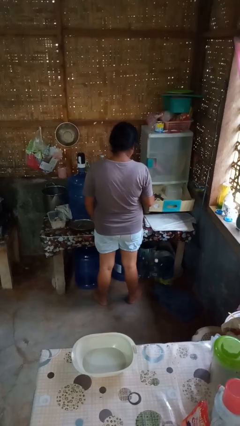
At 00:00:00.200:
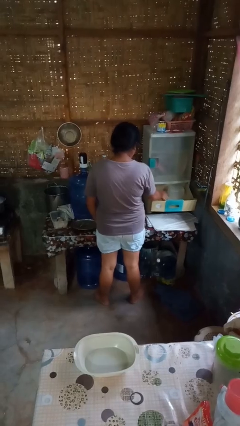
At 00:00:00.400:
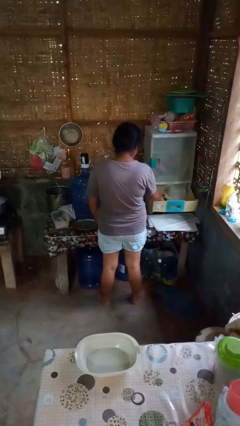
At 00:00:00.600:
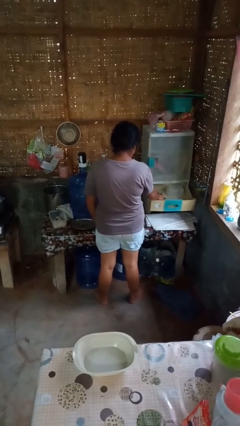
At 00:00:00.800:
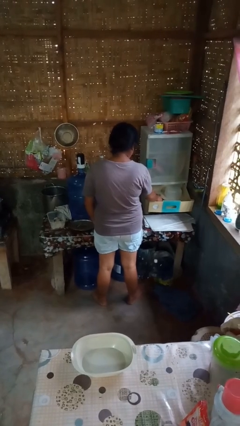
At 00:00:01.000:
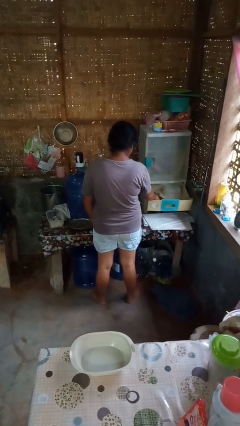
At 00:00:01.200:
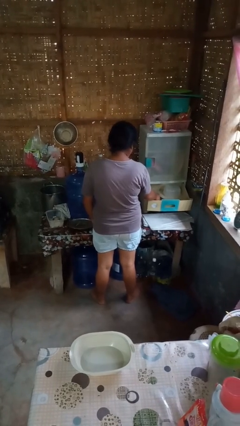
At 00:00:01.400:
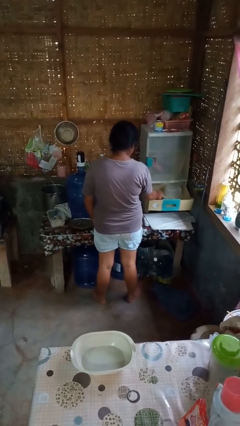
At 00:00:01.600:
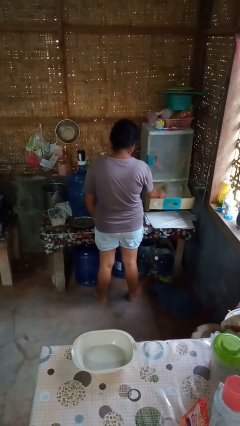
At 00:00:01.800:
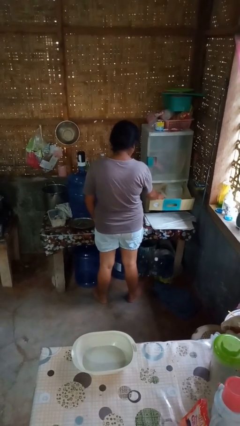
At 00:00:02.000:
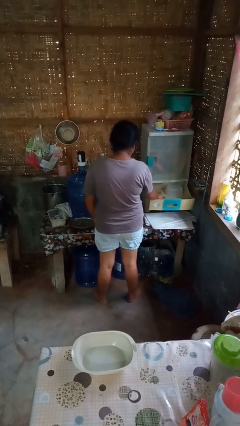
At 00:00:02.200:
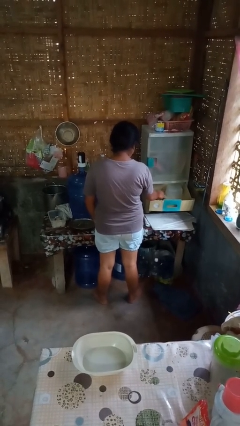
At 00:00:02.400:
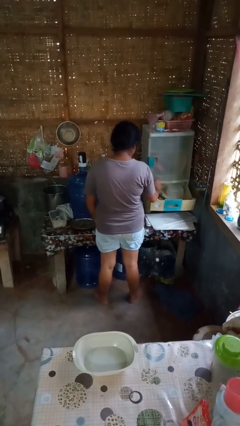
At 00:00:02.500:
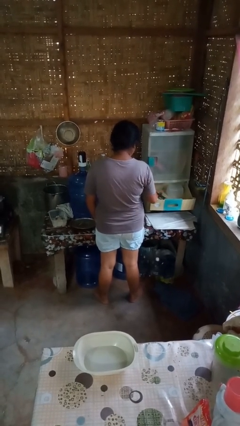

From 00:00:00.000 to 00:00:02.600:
person searches in kitchen drawer

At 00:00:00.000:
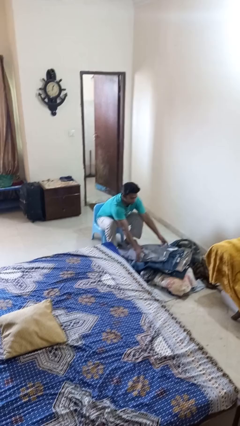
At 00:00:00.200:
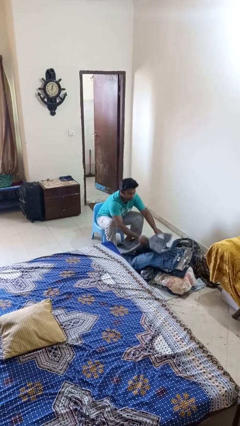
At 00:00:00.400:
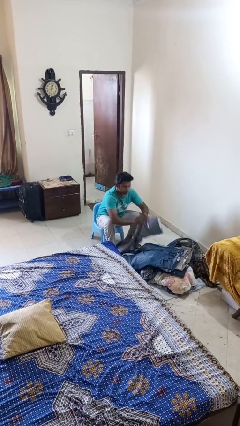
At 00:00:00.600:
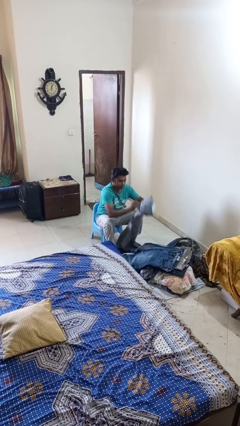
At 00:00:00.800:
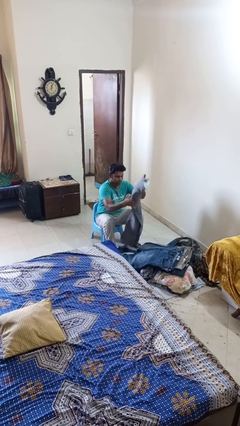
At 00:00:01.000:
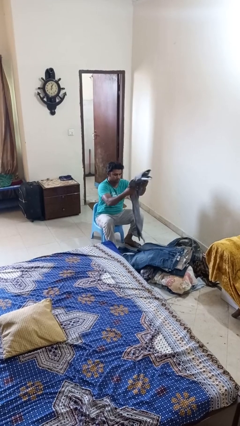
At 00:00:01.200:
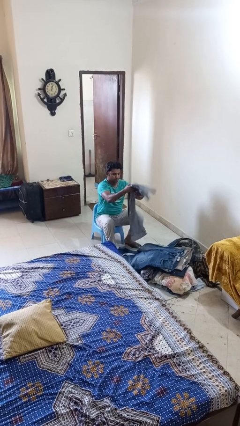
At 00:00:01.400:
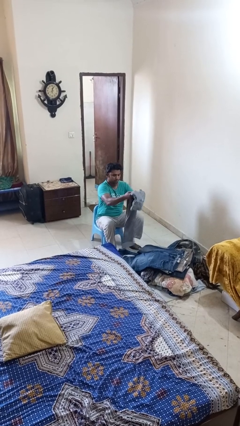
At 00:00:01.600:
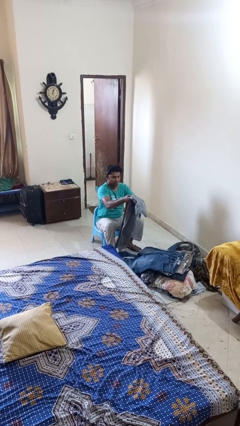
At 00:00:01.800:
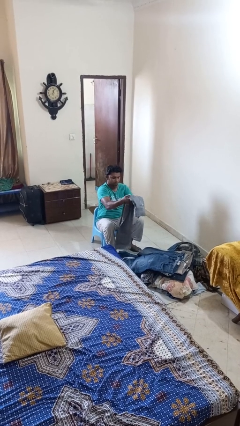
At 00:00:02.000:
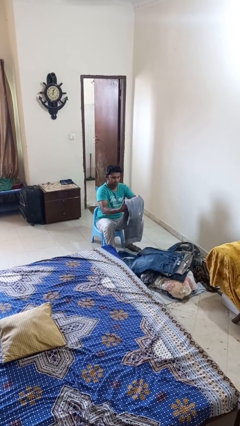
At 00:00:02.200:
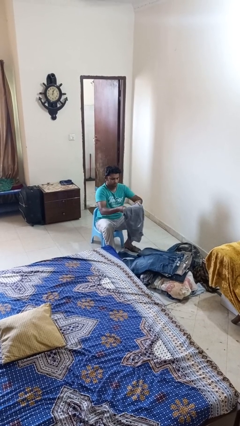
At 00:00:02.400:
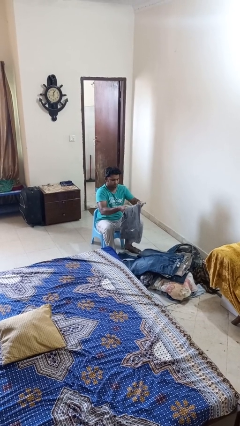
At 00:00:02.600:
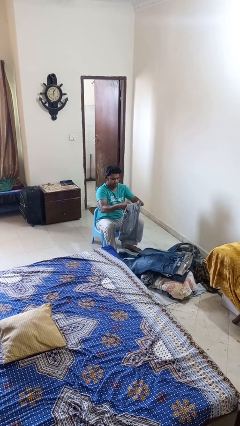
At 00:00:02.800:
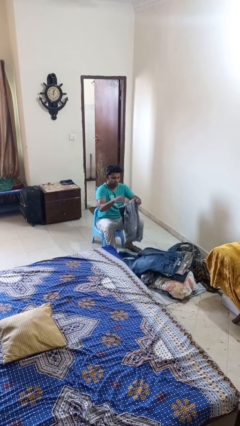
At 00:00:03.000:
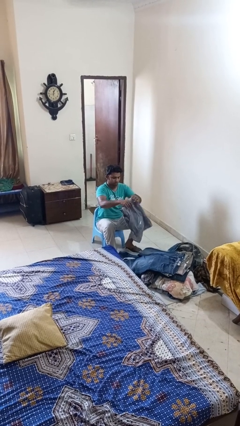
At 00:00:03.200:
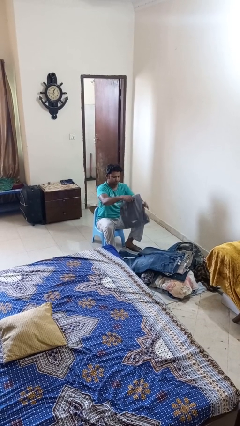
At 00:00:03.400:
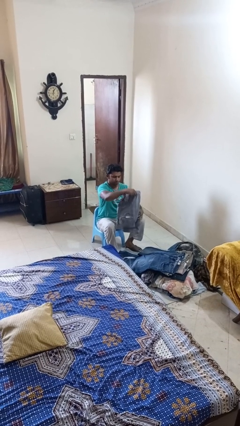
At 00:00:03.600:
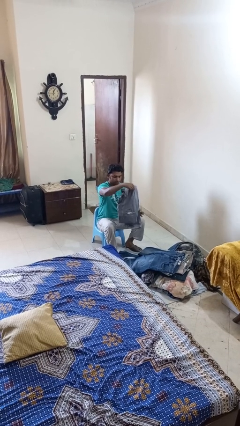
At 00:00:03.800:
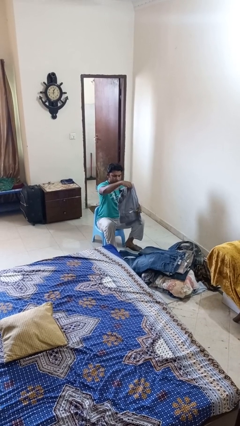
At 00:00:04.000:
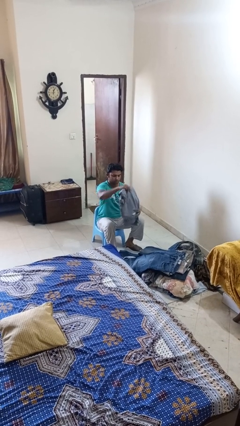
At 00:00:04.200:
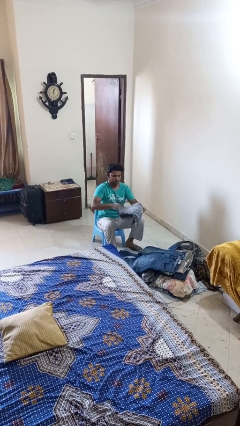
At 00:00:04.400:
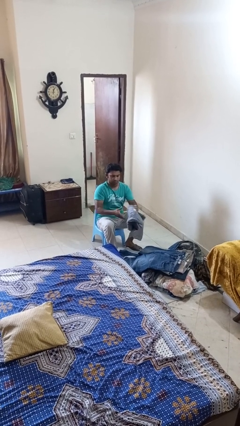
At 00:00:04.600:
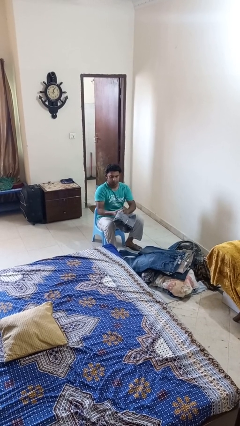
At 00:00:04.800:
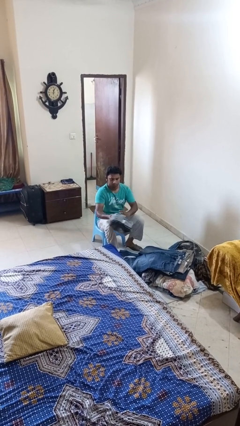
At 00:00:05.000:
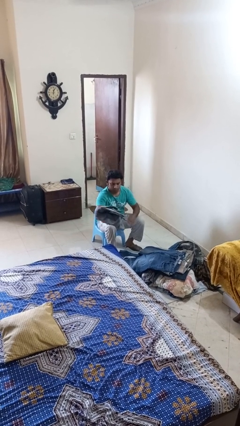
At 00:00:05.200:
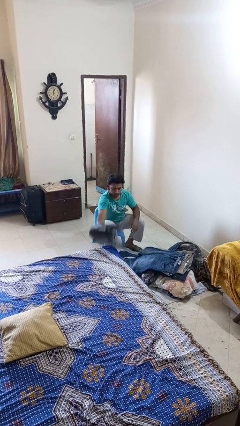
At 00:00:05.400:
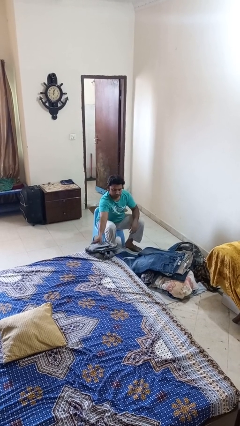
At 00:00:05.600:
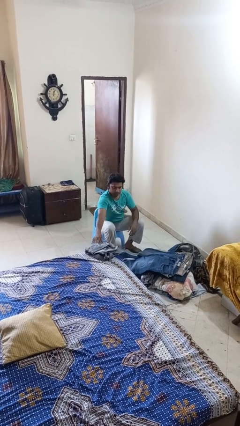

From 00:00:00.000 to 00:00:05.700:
person folds pants

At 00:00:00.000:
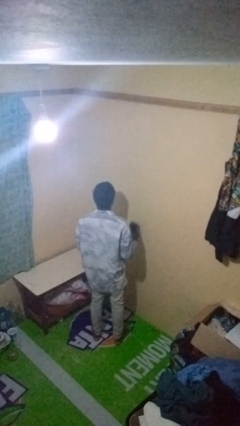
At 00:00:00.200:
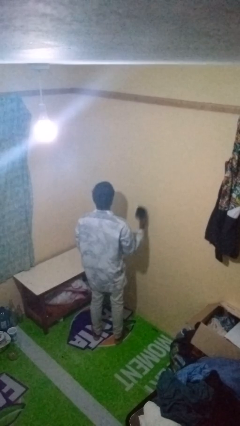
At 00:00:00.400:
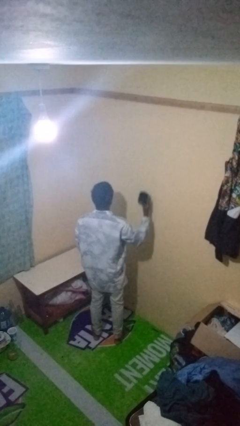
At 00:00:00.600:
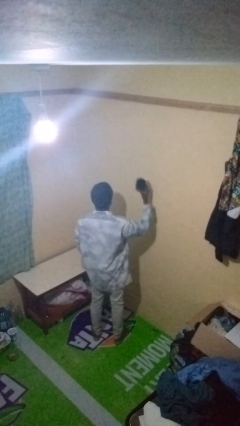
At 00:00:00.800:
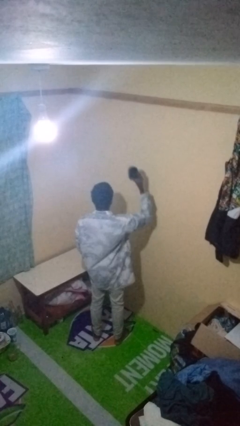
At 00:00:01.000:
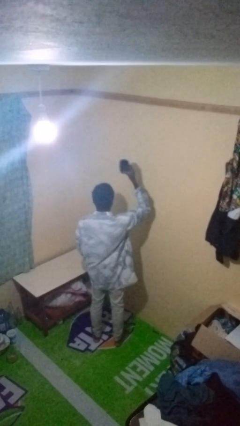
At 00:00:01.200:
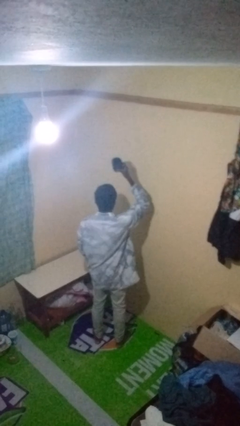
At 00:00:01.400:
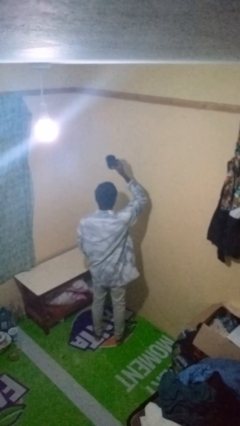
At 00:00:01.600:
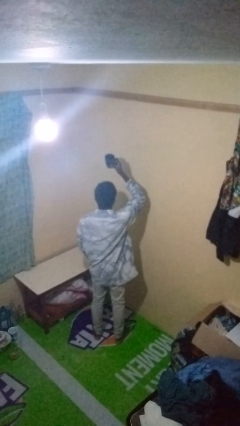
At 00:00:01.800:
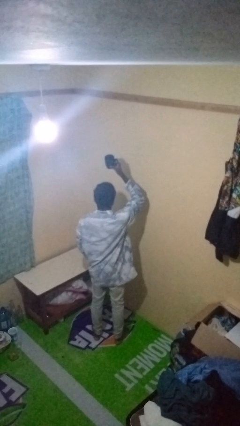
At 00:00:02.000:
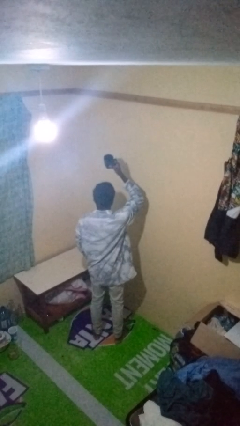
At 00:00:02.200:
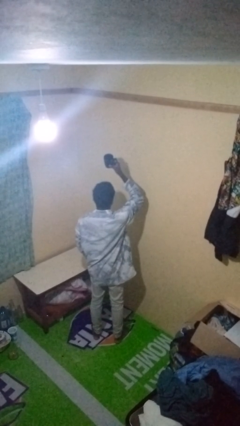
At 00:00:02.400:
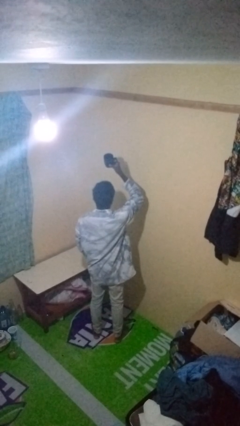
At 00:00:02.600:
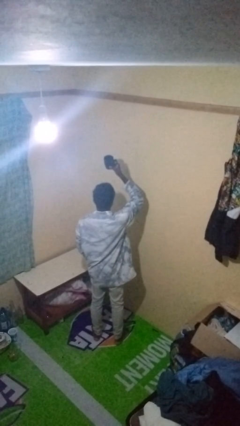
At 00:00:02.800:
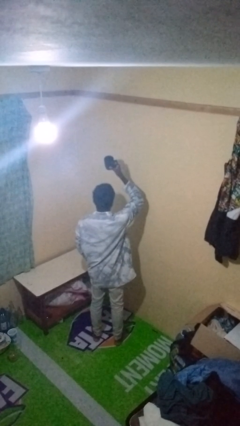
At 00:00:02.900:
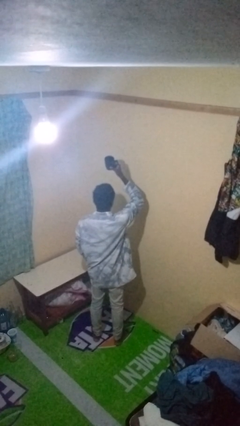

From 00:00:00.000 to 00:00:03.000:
person holds object above head

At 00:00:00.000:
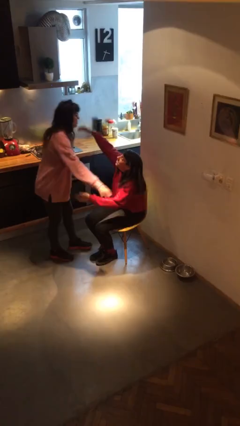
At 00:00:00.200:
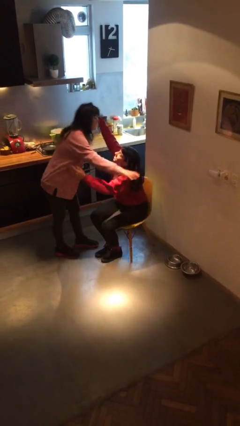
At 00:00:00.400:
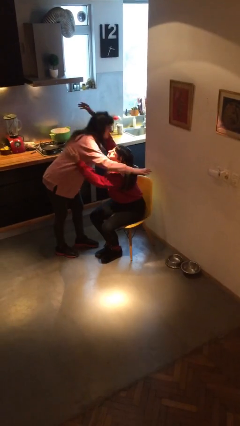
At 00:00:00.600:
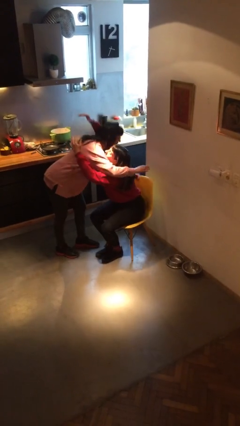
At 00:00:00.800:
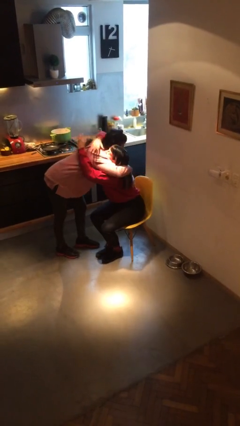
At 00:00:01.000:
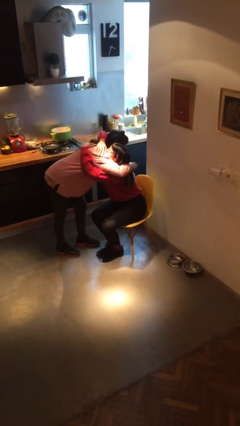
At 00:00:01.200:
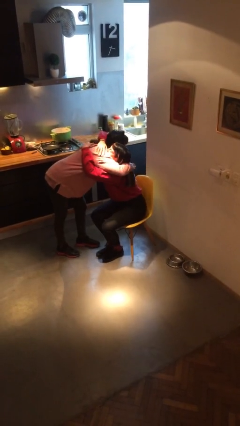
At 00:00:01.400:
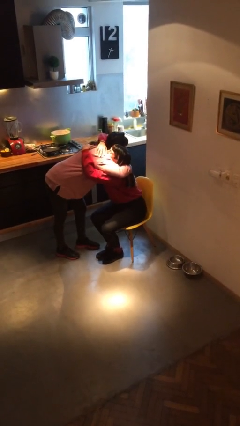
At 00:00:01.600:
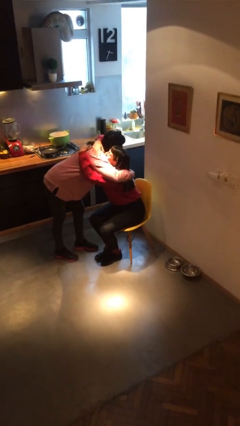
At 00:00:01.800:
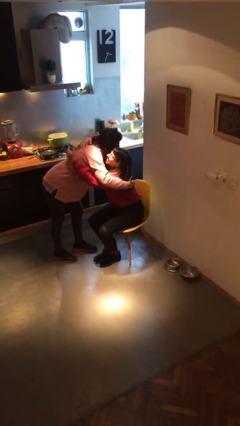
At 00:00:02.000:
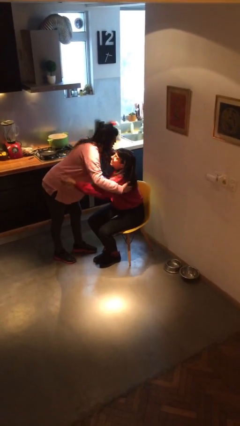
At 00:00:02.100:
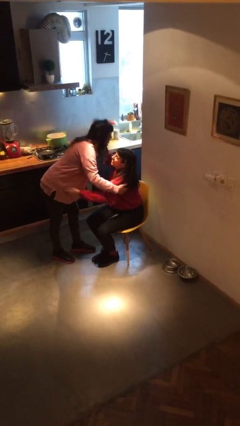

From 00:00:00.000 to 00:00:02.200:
person embraces person

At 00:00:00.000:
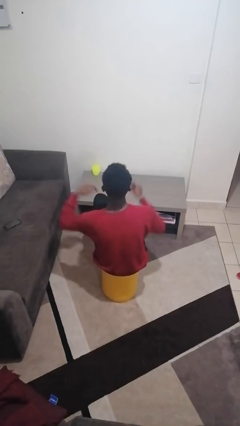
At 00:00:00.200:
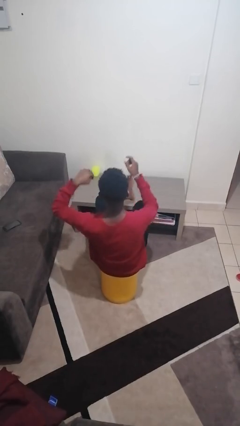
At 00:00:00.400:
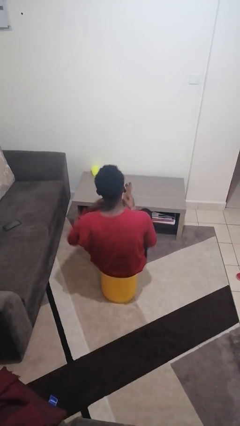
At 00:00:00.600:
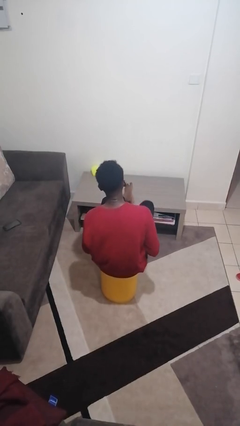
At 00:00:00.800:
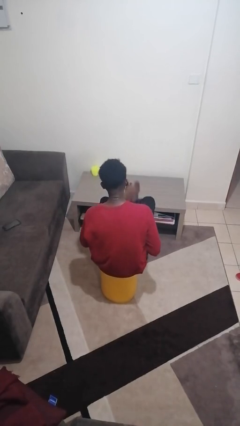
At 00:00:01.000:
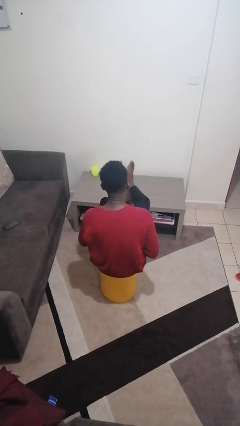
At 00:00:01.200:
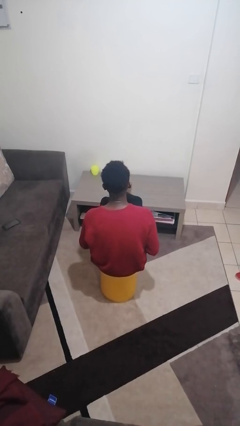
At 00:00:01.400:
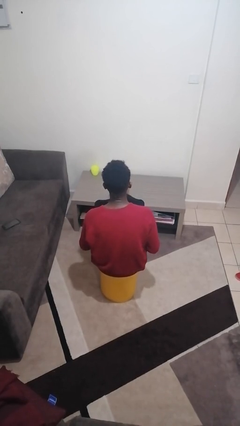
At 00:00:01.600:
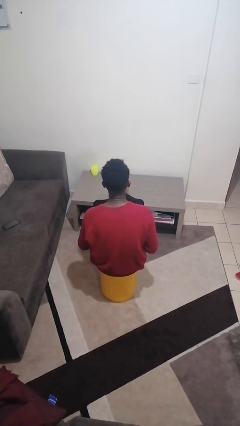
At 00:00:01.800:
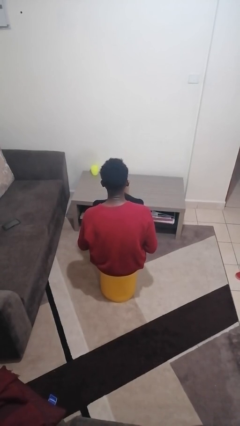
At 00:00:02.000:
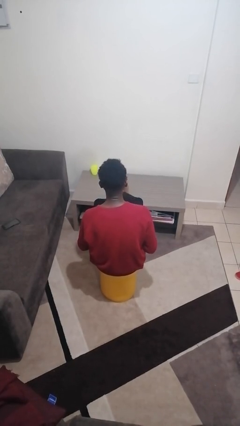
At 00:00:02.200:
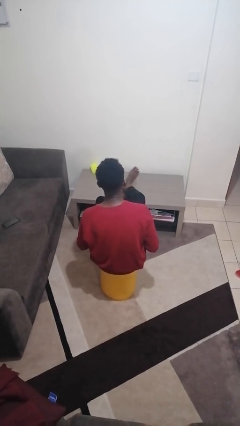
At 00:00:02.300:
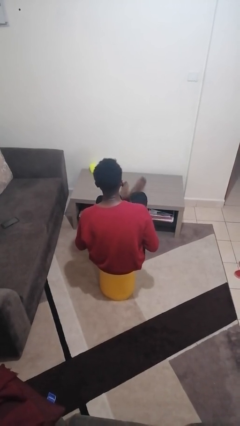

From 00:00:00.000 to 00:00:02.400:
person puts feet up

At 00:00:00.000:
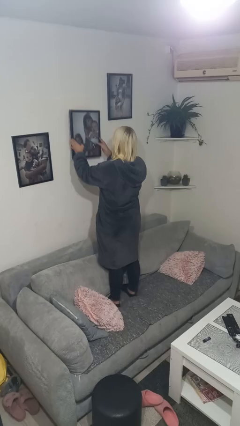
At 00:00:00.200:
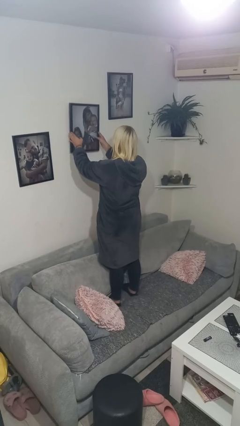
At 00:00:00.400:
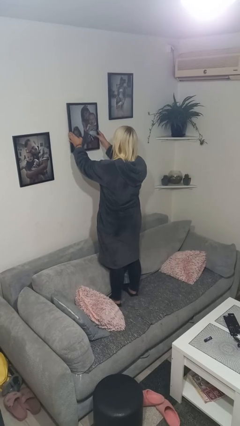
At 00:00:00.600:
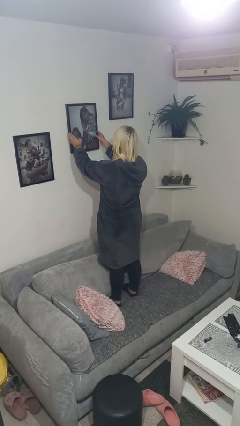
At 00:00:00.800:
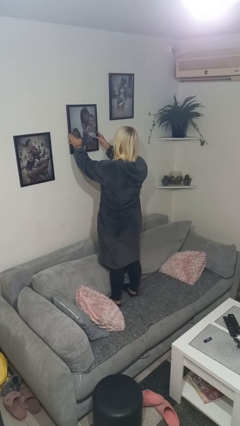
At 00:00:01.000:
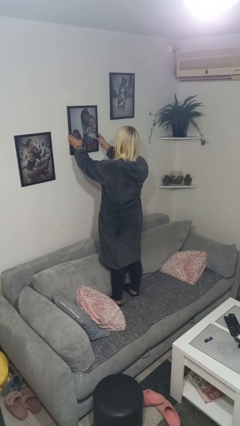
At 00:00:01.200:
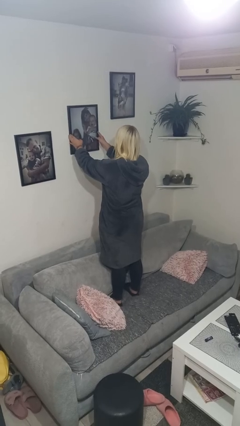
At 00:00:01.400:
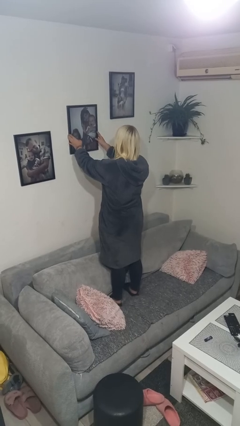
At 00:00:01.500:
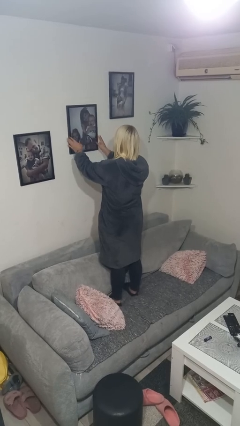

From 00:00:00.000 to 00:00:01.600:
person puts up picture frame
